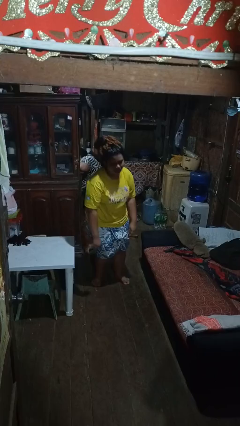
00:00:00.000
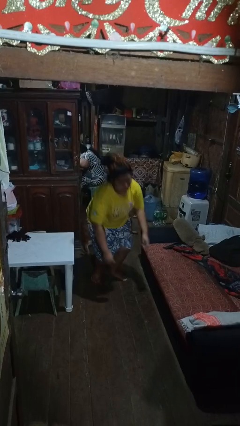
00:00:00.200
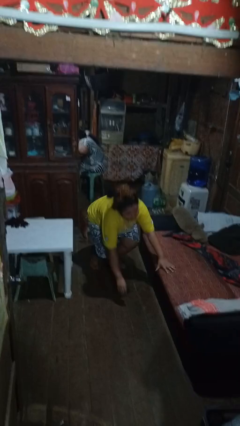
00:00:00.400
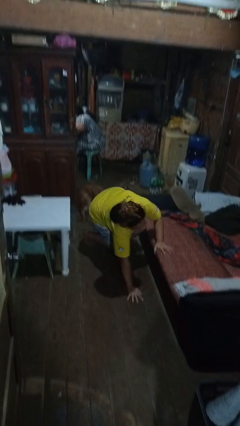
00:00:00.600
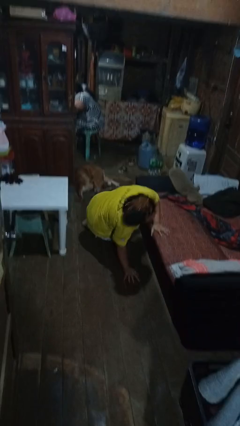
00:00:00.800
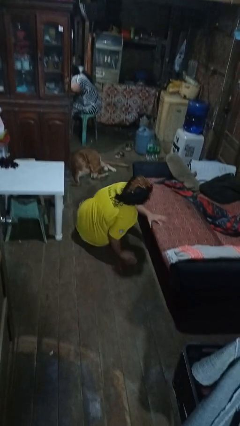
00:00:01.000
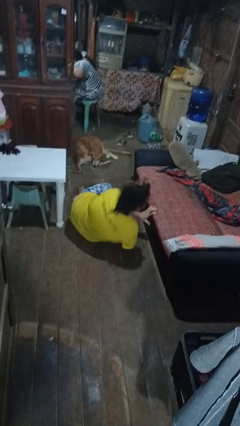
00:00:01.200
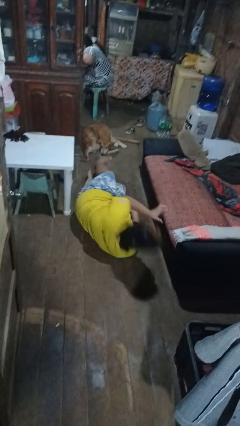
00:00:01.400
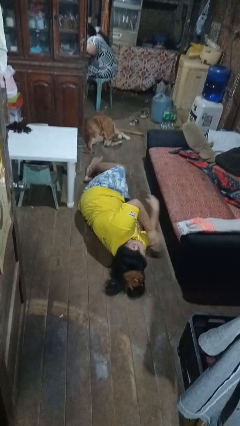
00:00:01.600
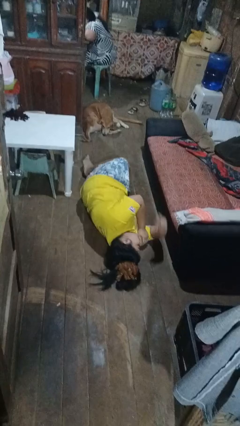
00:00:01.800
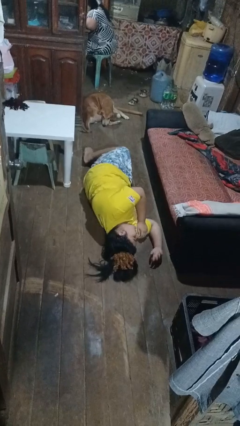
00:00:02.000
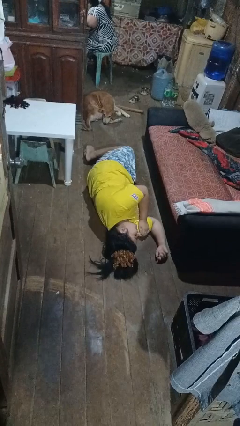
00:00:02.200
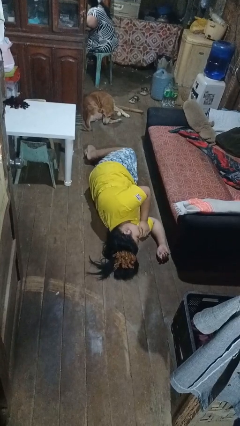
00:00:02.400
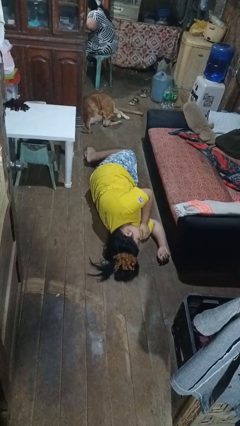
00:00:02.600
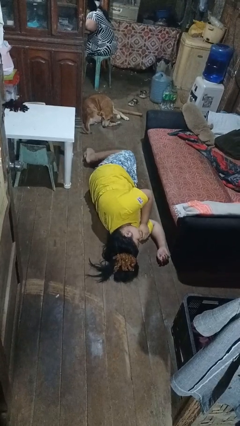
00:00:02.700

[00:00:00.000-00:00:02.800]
person falls while standing

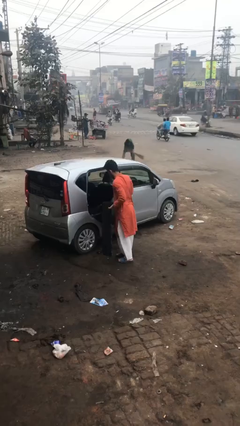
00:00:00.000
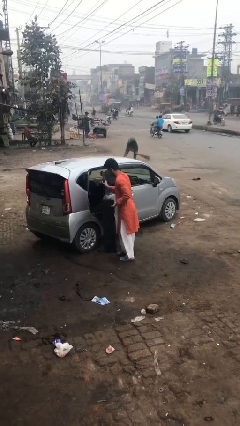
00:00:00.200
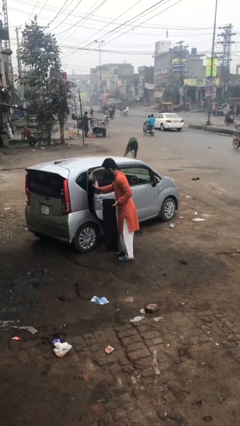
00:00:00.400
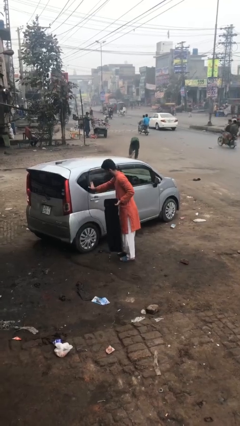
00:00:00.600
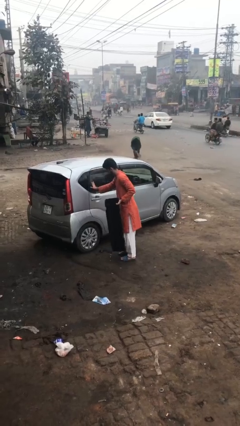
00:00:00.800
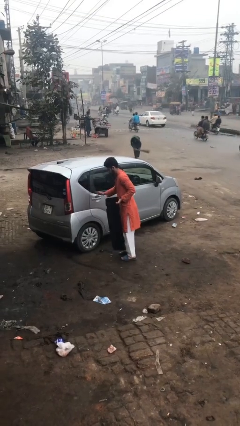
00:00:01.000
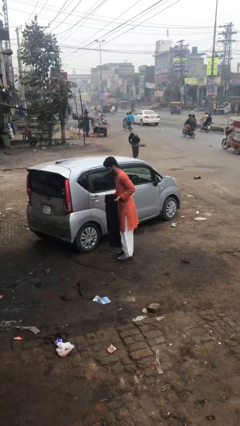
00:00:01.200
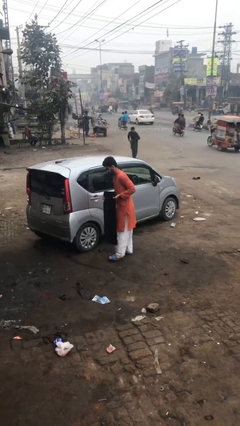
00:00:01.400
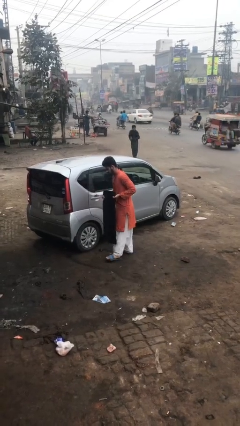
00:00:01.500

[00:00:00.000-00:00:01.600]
person closes car door

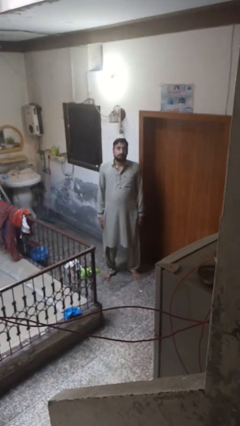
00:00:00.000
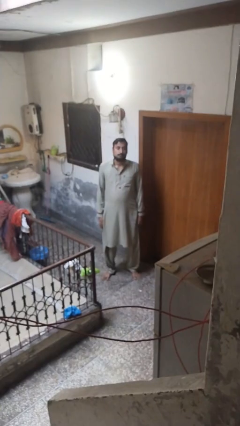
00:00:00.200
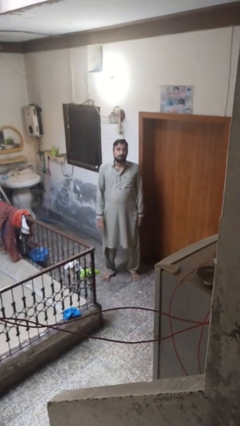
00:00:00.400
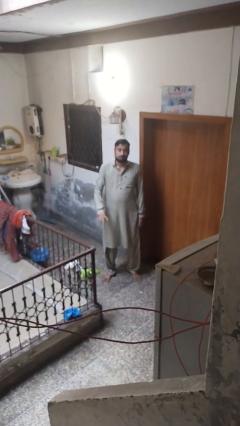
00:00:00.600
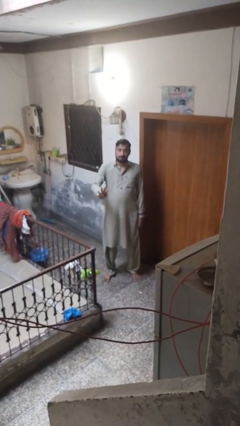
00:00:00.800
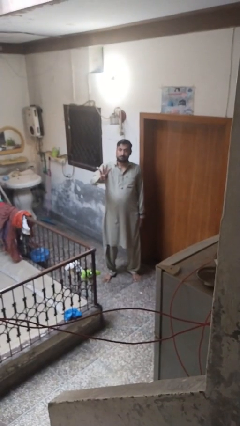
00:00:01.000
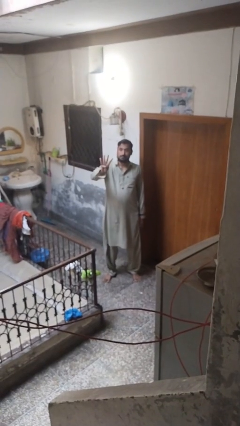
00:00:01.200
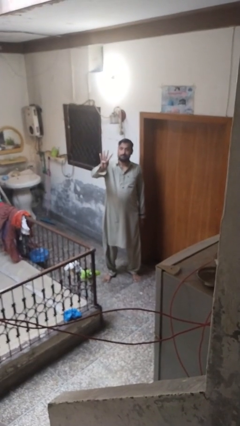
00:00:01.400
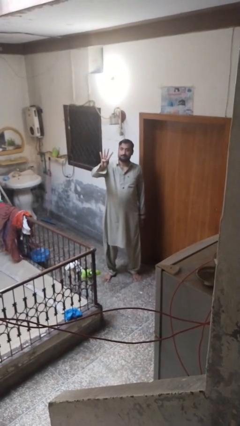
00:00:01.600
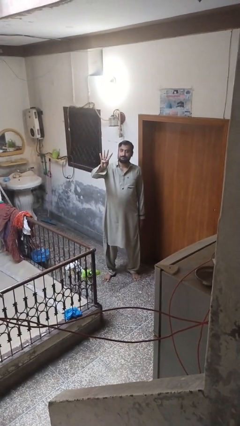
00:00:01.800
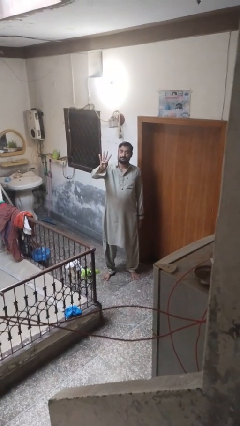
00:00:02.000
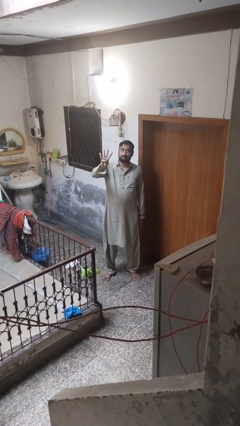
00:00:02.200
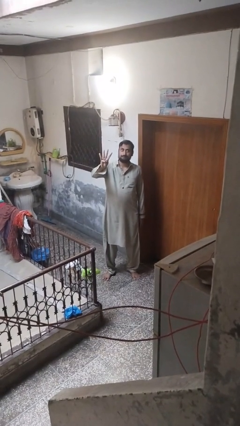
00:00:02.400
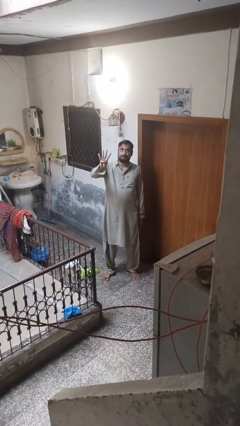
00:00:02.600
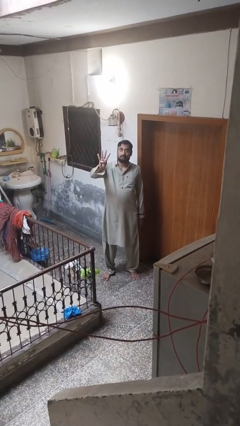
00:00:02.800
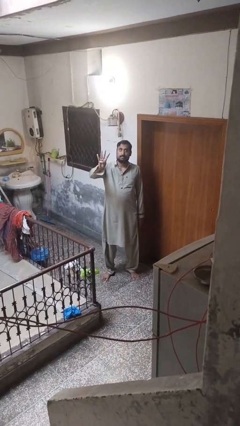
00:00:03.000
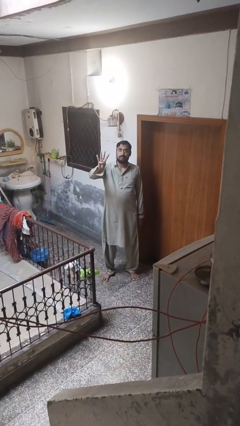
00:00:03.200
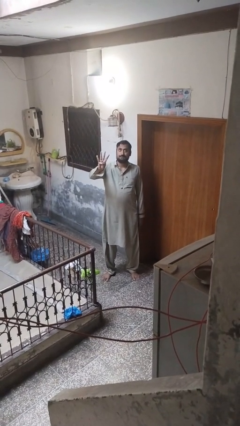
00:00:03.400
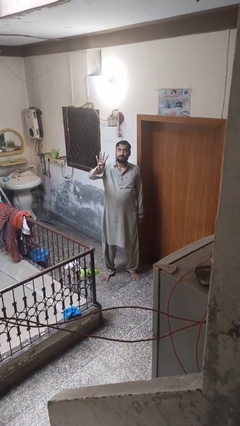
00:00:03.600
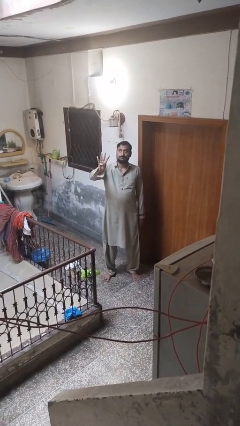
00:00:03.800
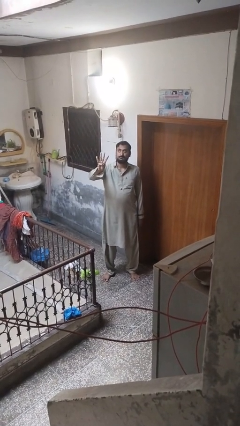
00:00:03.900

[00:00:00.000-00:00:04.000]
person gestures number four

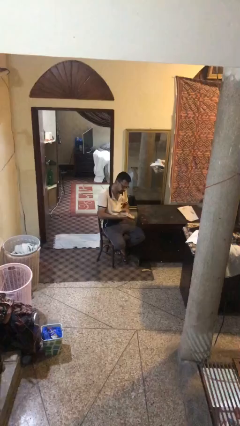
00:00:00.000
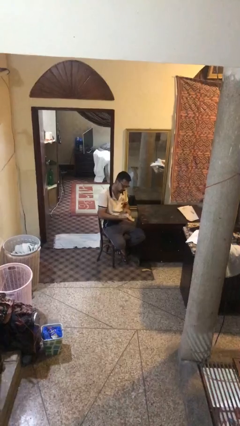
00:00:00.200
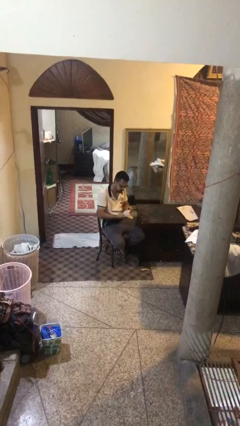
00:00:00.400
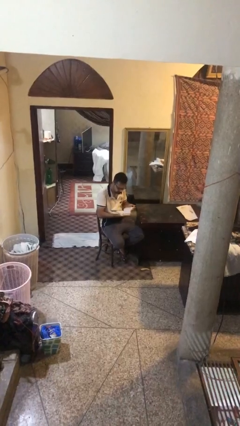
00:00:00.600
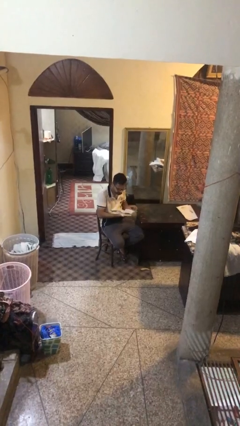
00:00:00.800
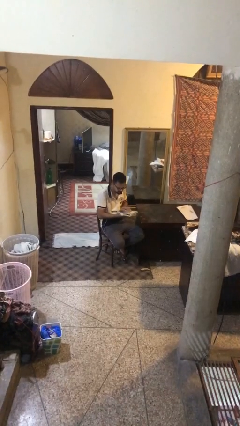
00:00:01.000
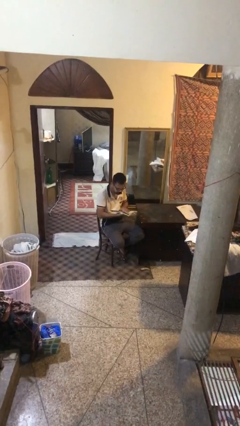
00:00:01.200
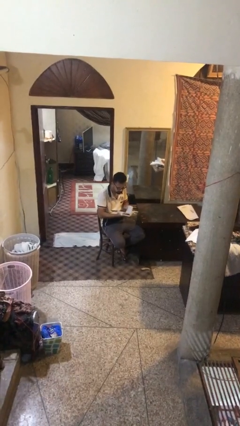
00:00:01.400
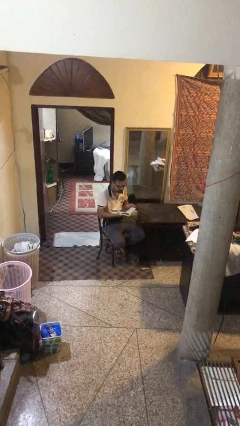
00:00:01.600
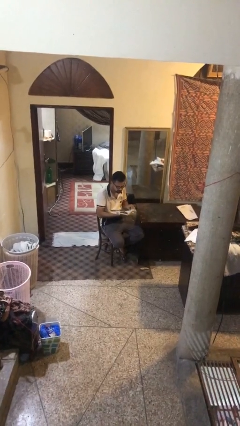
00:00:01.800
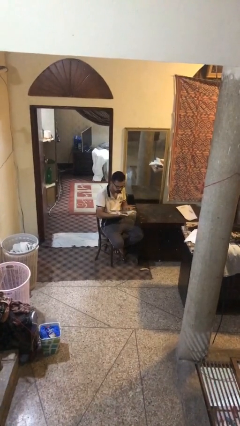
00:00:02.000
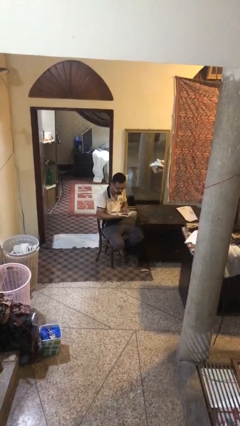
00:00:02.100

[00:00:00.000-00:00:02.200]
person reads document

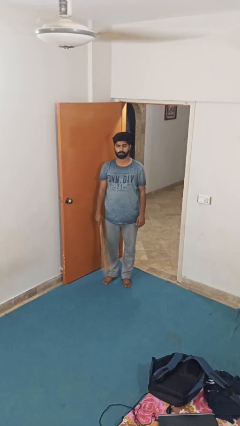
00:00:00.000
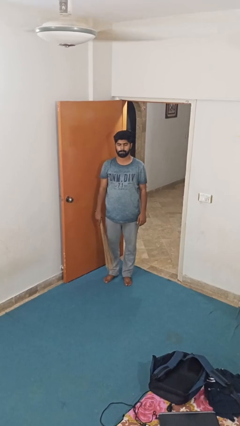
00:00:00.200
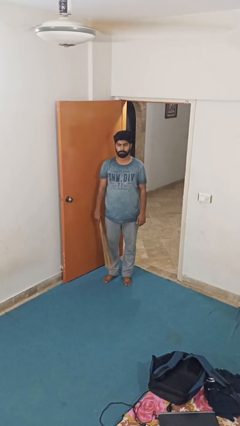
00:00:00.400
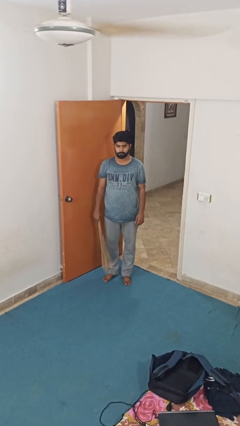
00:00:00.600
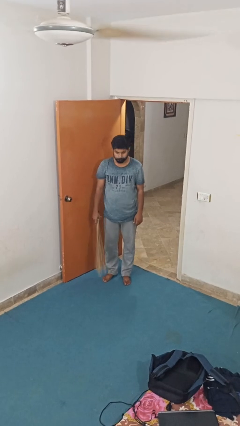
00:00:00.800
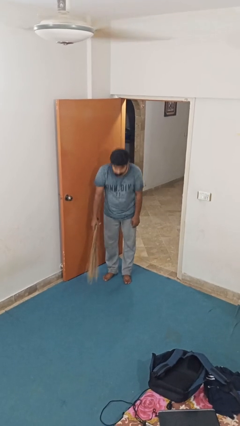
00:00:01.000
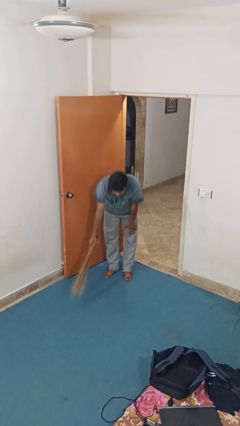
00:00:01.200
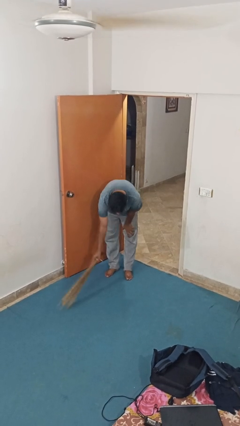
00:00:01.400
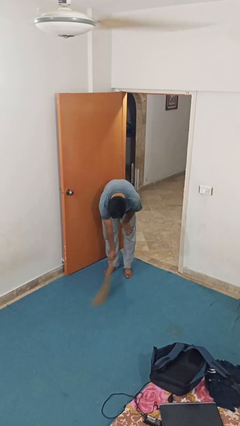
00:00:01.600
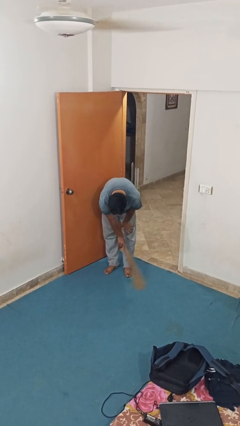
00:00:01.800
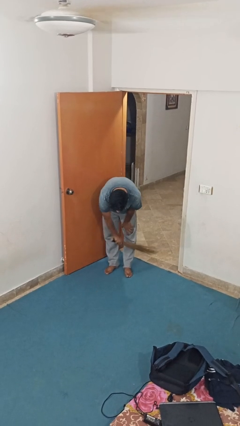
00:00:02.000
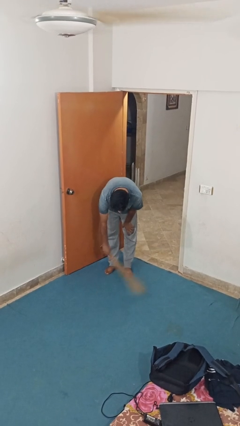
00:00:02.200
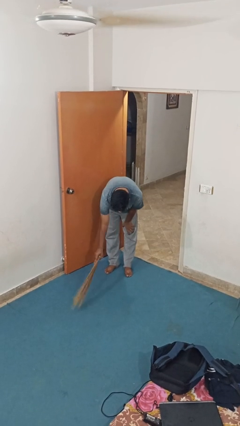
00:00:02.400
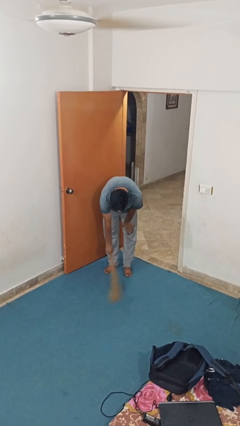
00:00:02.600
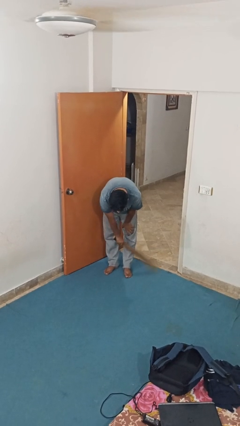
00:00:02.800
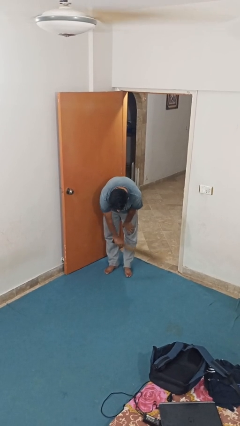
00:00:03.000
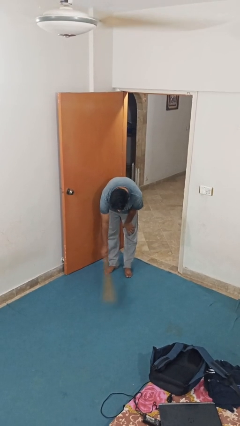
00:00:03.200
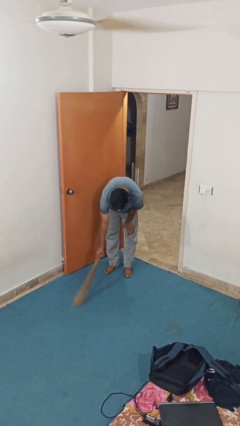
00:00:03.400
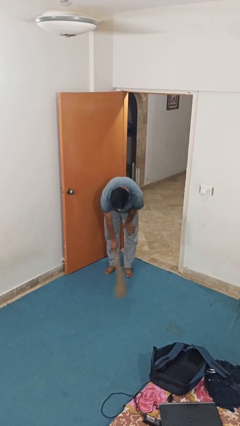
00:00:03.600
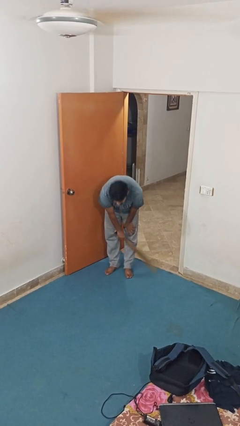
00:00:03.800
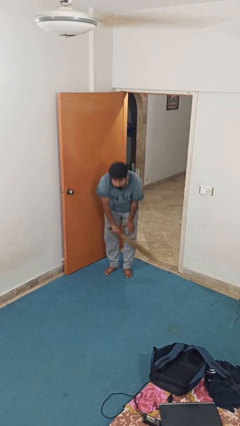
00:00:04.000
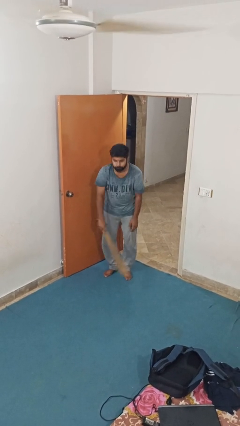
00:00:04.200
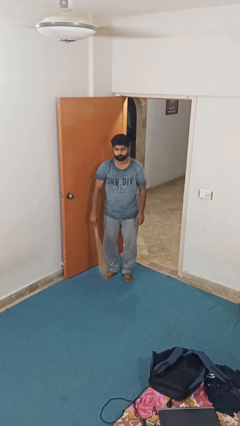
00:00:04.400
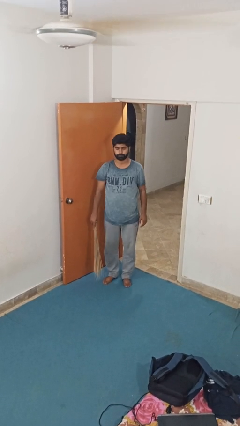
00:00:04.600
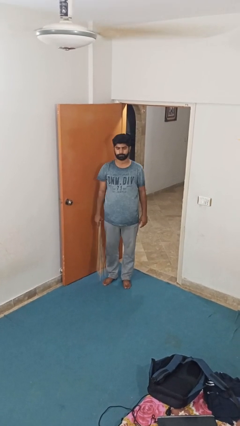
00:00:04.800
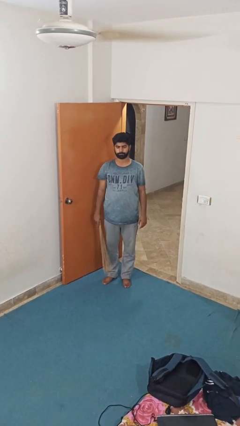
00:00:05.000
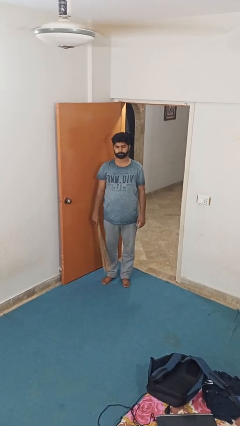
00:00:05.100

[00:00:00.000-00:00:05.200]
person sweeps floor

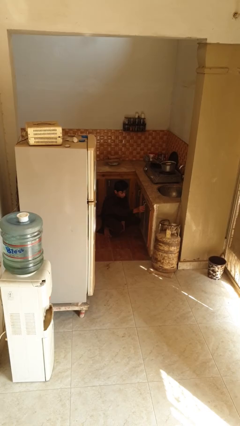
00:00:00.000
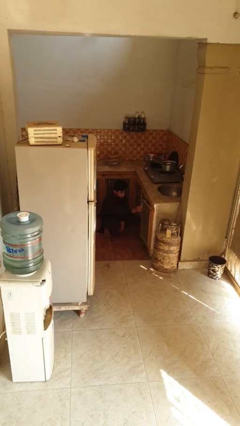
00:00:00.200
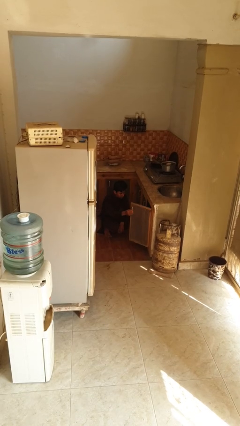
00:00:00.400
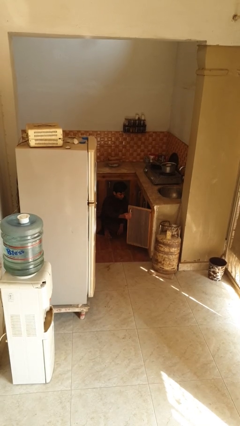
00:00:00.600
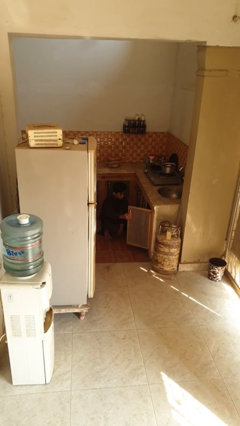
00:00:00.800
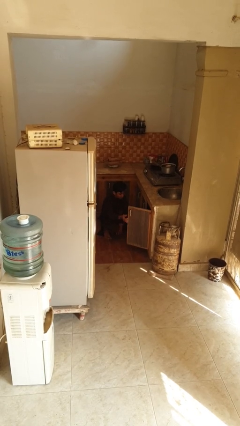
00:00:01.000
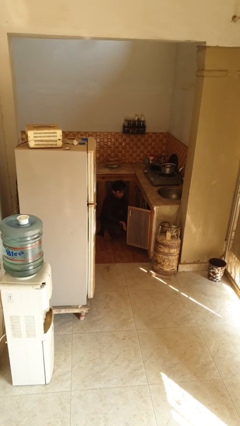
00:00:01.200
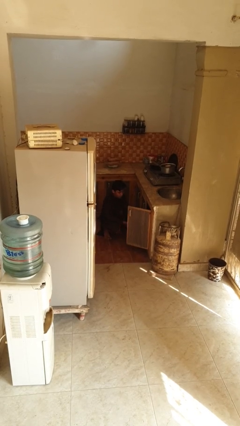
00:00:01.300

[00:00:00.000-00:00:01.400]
person opens kitchen drawer

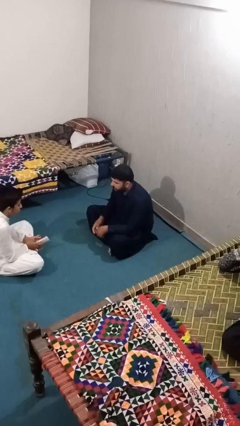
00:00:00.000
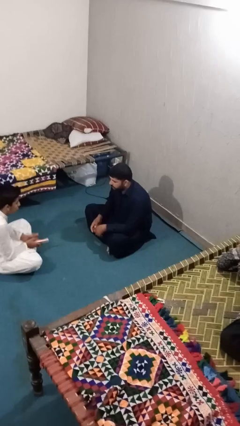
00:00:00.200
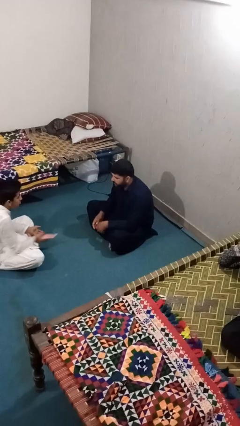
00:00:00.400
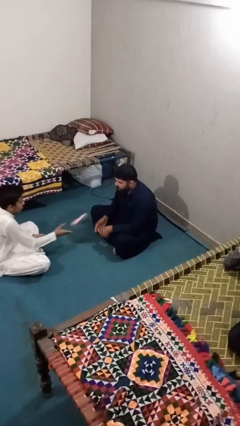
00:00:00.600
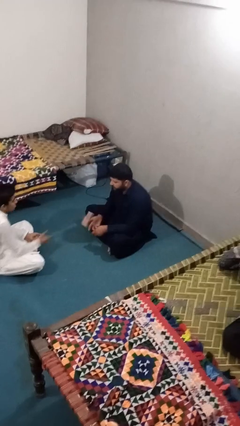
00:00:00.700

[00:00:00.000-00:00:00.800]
person catches object from person
